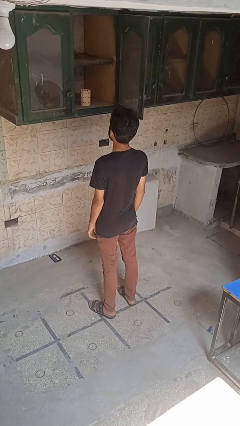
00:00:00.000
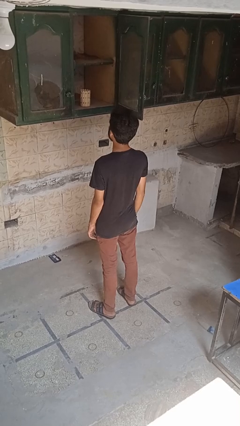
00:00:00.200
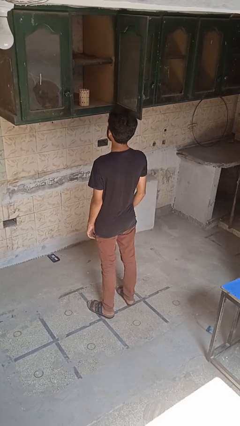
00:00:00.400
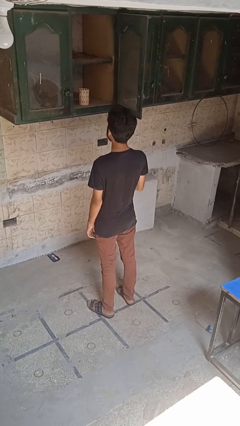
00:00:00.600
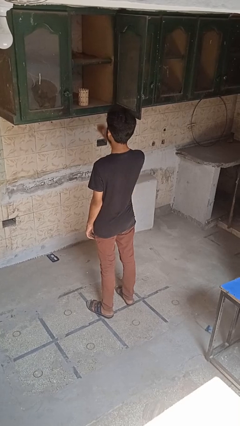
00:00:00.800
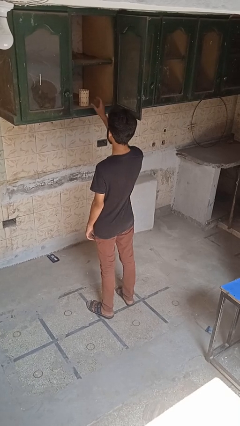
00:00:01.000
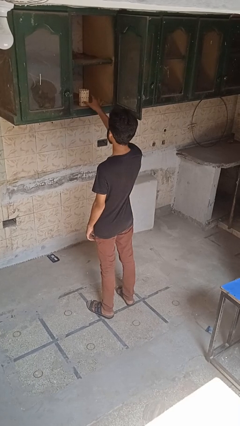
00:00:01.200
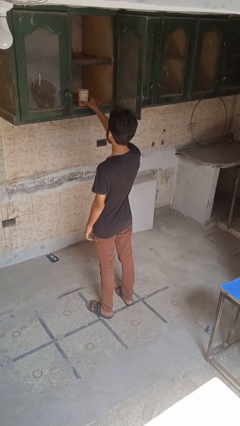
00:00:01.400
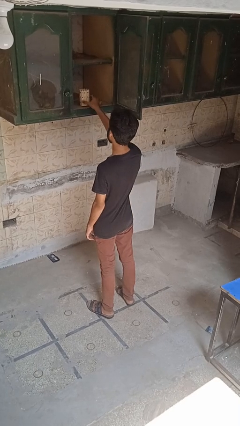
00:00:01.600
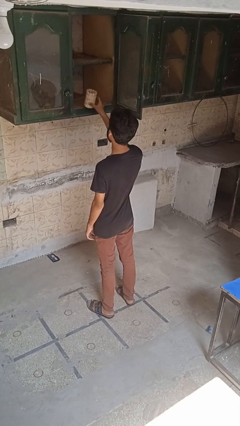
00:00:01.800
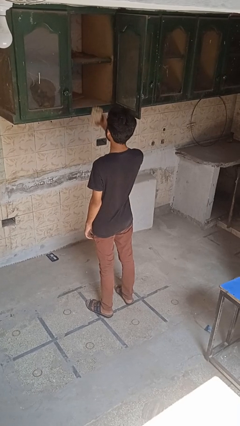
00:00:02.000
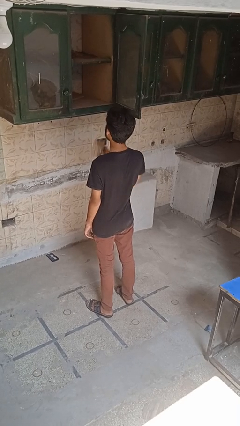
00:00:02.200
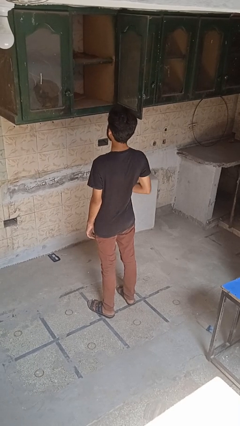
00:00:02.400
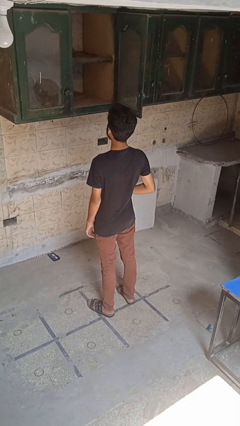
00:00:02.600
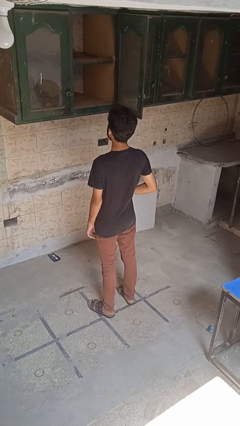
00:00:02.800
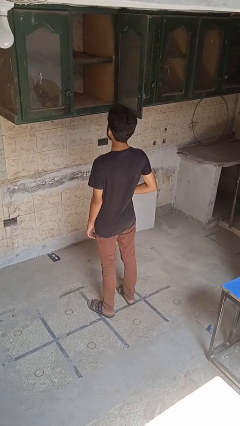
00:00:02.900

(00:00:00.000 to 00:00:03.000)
person picks up object from cabinet

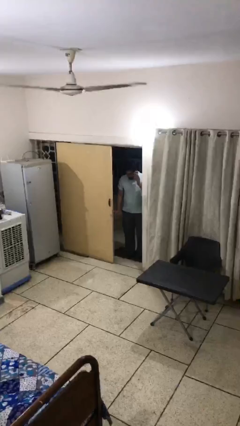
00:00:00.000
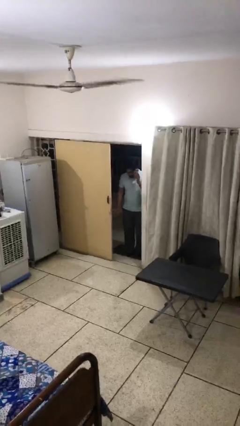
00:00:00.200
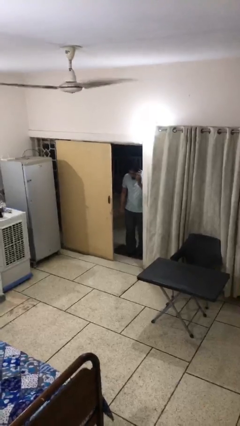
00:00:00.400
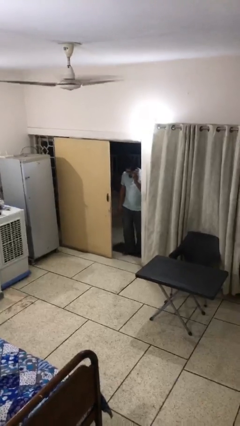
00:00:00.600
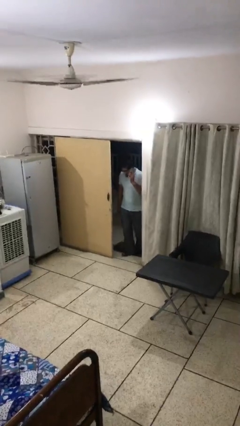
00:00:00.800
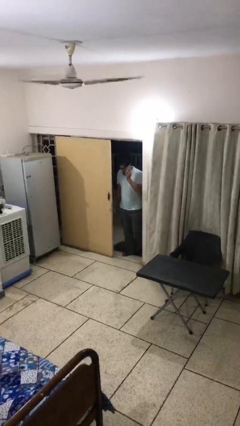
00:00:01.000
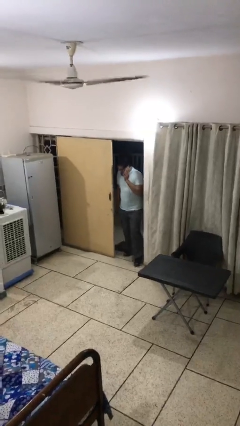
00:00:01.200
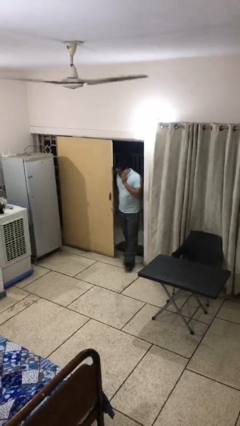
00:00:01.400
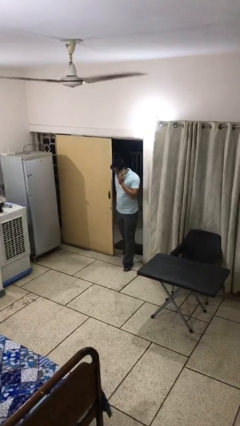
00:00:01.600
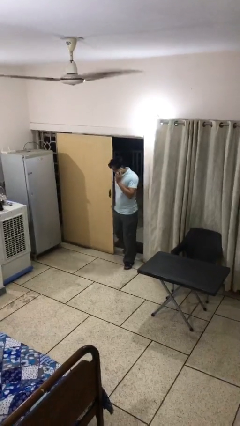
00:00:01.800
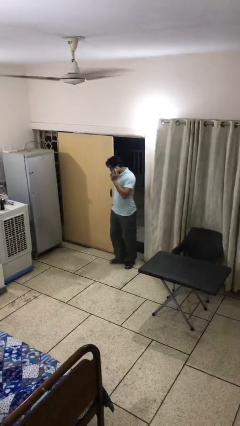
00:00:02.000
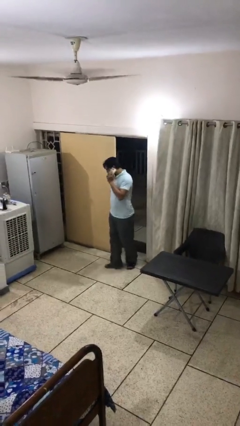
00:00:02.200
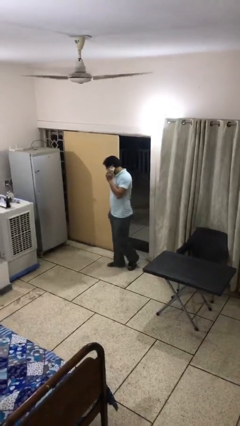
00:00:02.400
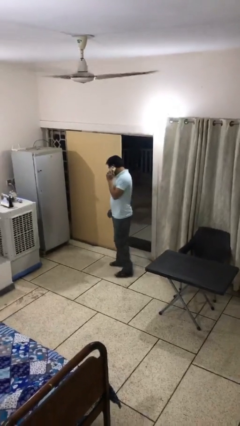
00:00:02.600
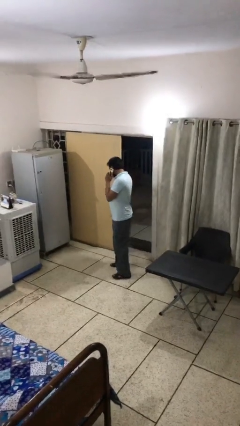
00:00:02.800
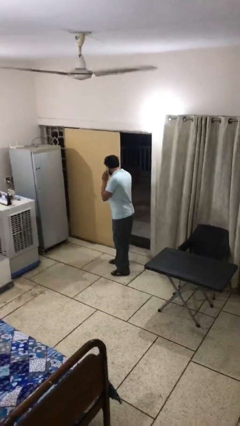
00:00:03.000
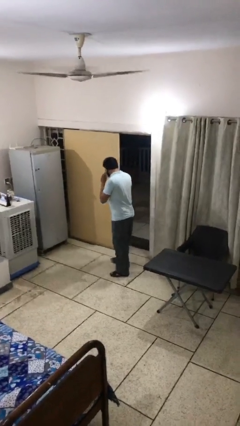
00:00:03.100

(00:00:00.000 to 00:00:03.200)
person enters scene through structure

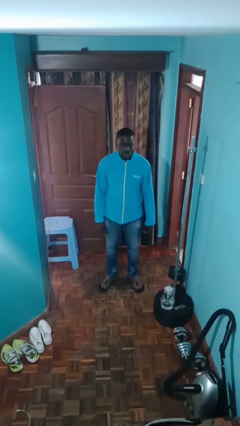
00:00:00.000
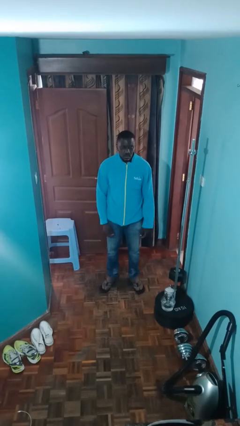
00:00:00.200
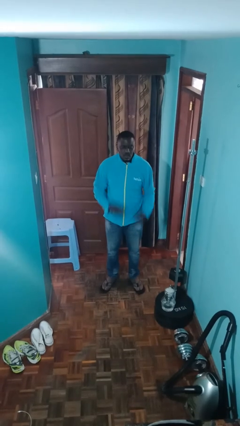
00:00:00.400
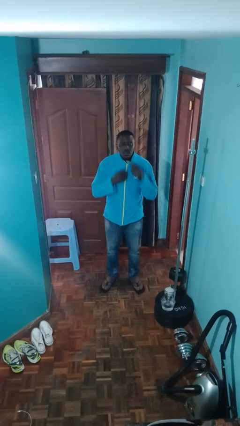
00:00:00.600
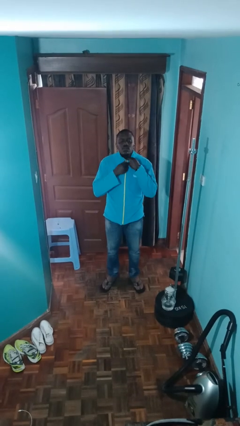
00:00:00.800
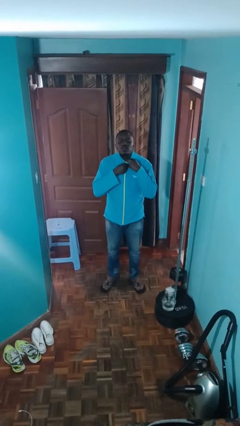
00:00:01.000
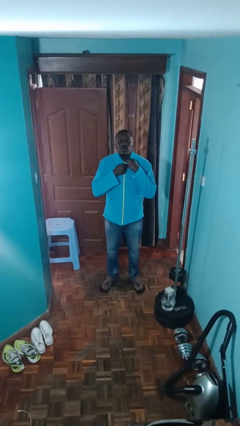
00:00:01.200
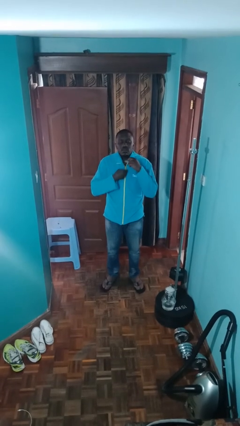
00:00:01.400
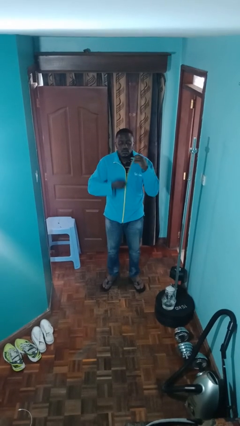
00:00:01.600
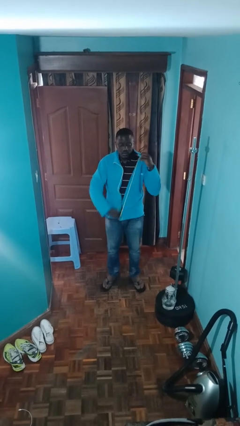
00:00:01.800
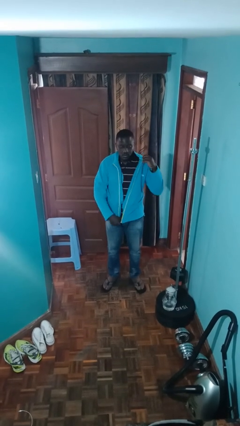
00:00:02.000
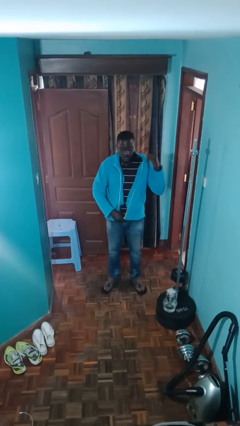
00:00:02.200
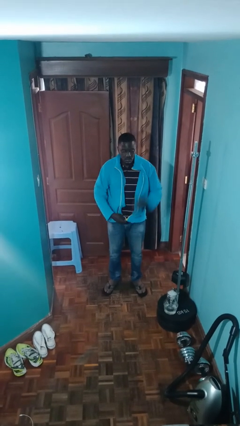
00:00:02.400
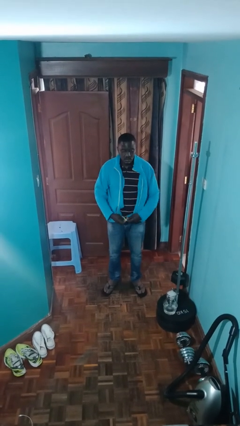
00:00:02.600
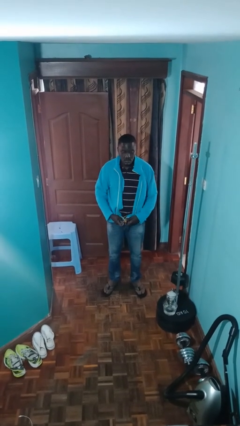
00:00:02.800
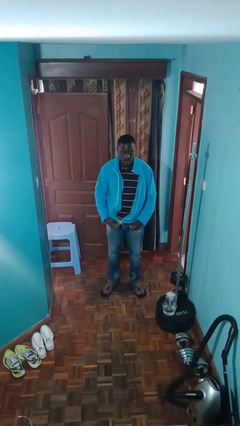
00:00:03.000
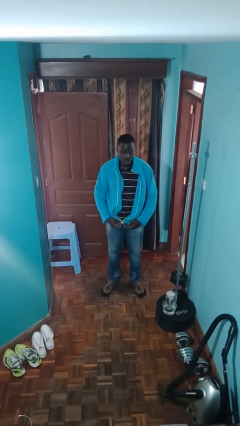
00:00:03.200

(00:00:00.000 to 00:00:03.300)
person unzips jacket

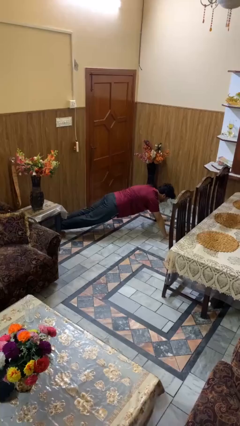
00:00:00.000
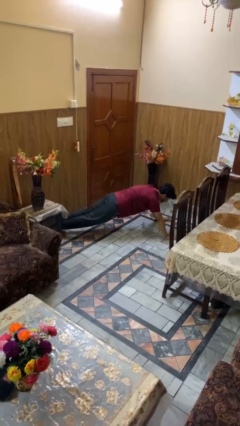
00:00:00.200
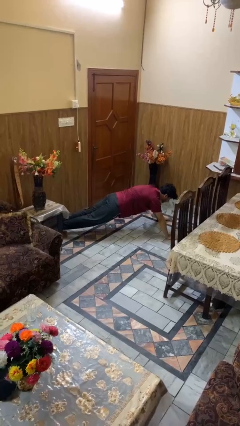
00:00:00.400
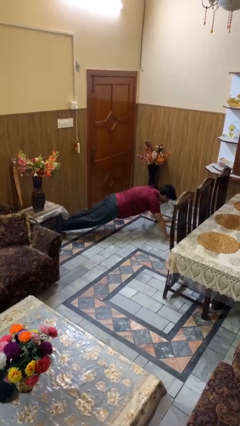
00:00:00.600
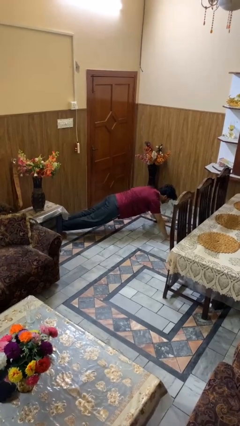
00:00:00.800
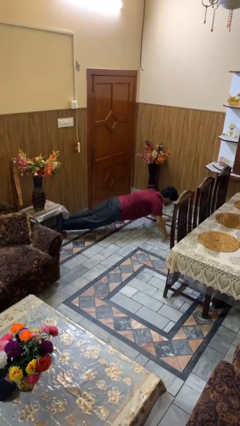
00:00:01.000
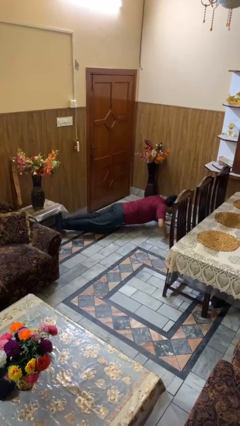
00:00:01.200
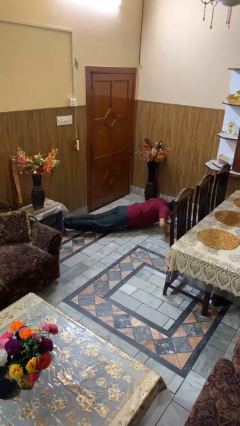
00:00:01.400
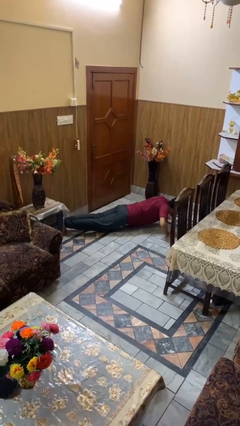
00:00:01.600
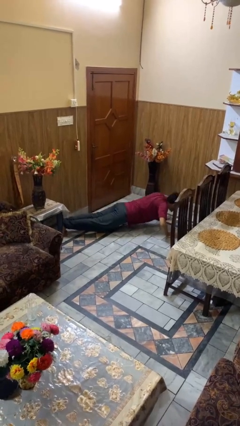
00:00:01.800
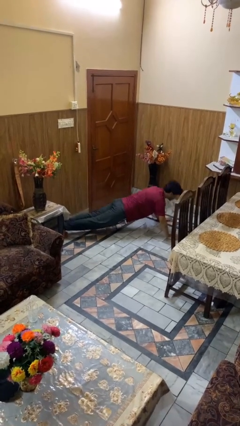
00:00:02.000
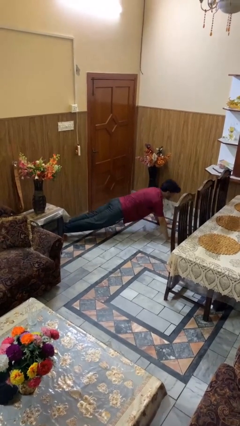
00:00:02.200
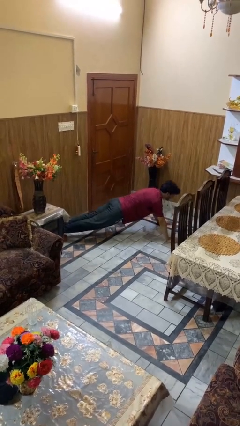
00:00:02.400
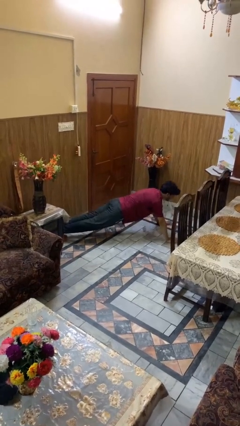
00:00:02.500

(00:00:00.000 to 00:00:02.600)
person exercises with pushup

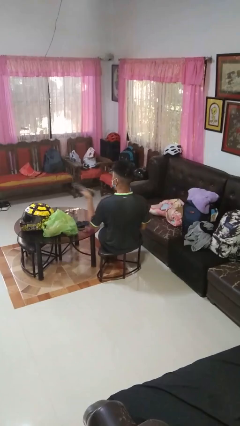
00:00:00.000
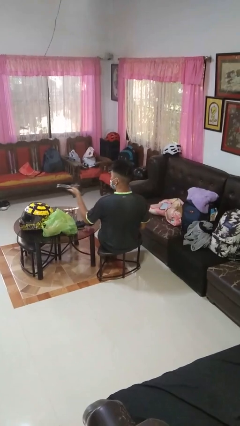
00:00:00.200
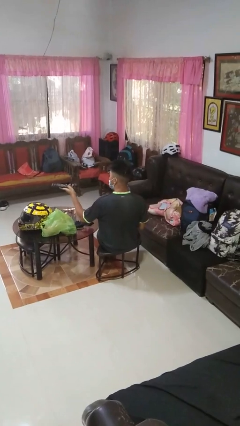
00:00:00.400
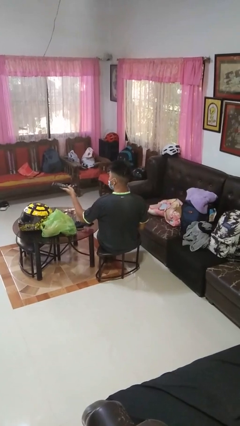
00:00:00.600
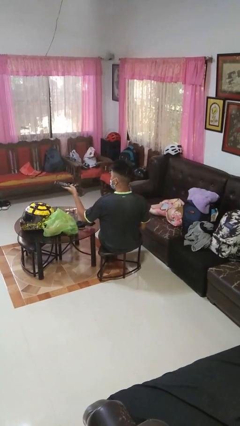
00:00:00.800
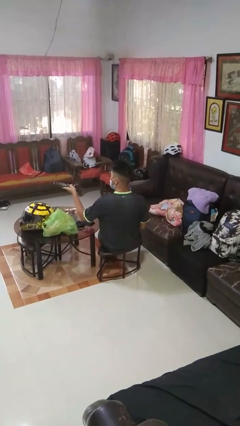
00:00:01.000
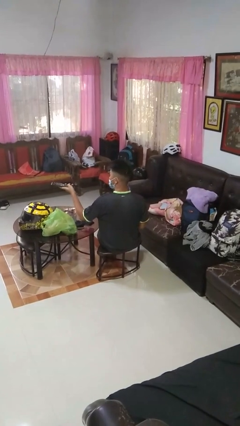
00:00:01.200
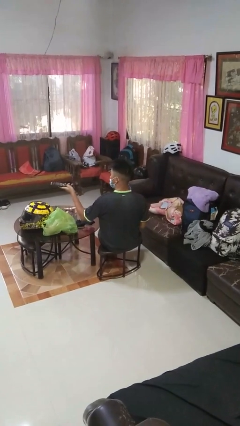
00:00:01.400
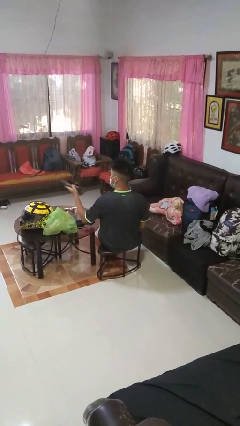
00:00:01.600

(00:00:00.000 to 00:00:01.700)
person uses television remote

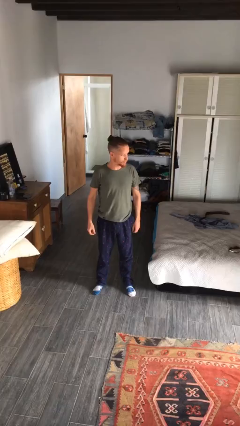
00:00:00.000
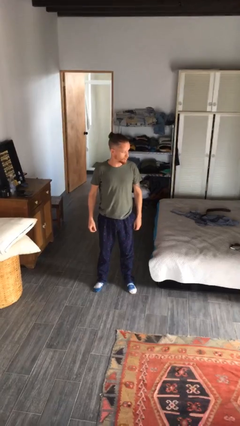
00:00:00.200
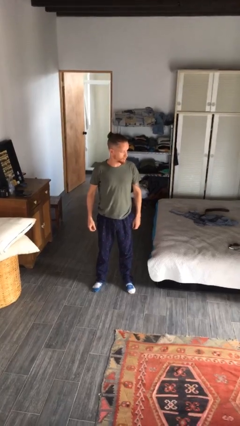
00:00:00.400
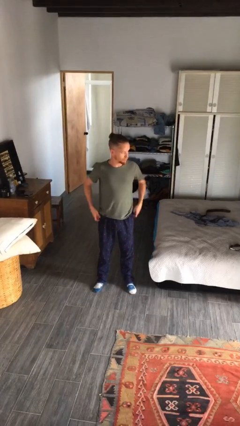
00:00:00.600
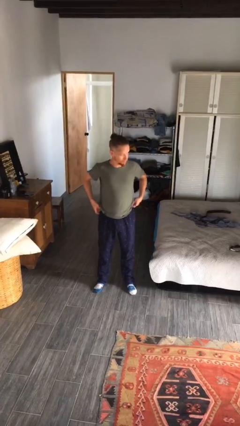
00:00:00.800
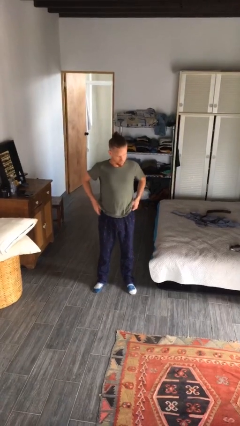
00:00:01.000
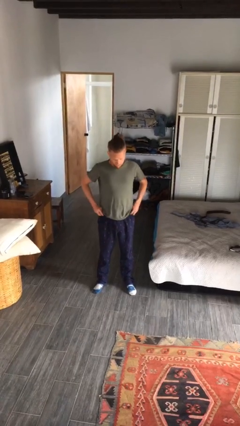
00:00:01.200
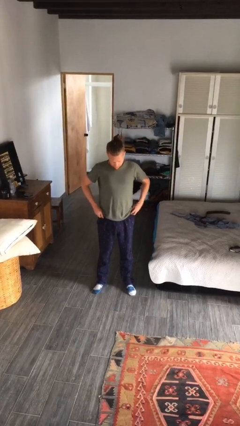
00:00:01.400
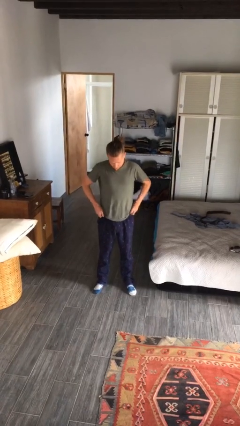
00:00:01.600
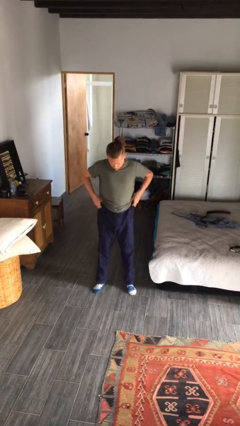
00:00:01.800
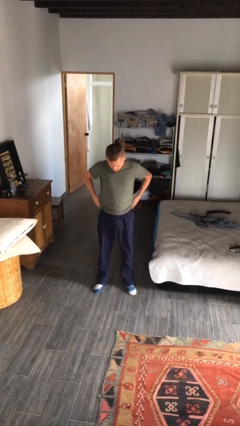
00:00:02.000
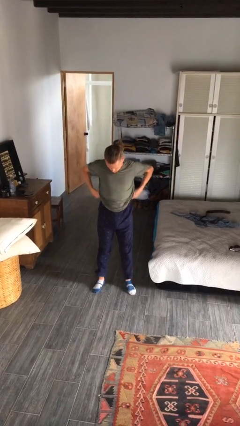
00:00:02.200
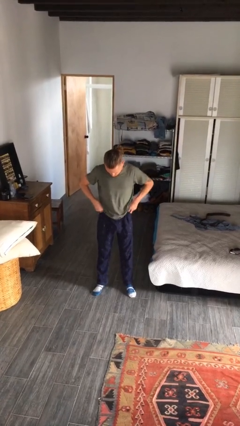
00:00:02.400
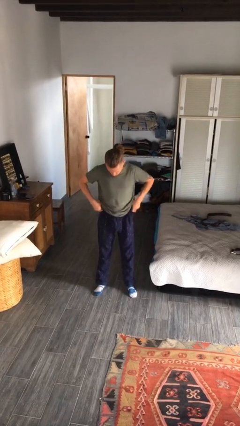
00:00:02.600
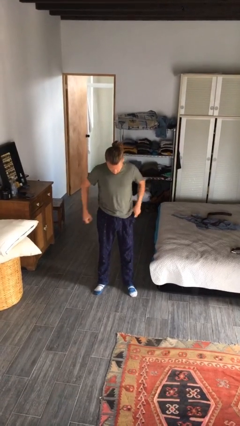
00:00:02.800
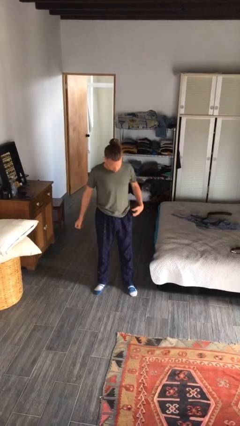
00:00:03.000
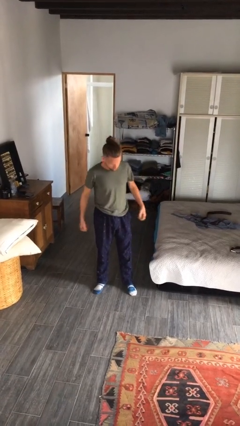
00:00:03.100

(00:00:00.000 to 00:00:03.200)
person hikes up pants

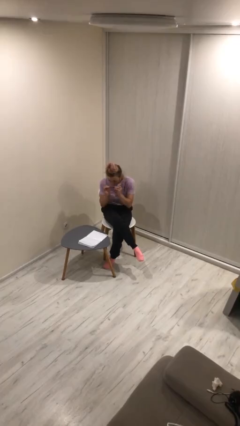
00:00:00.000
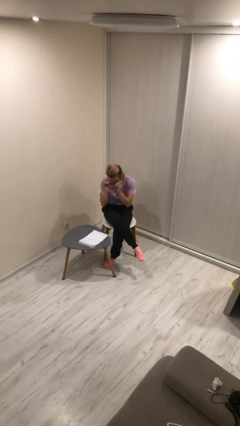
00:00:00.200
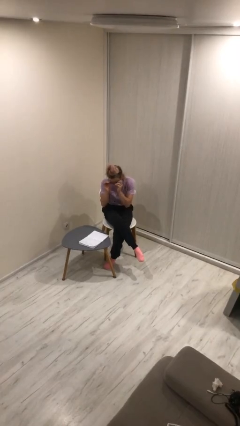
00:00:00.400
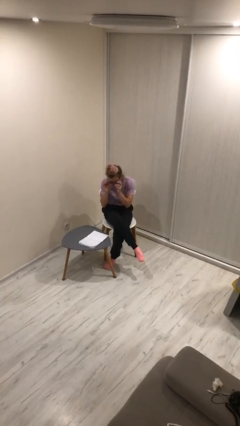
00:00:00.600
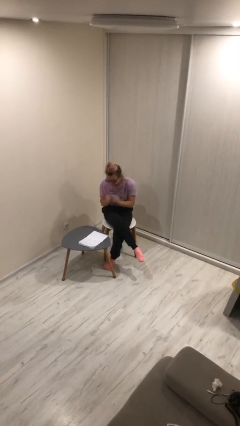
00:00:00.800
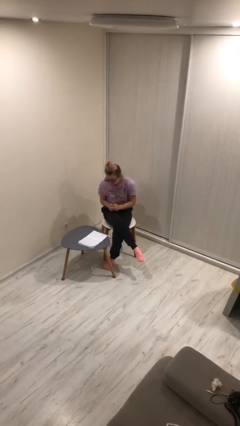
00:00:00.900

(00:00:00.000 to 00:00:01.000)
person puts on glasses
